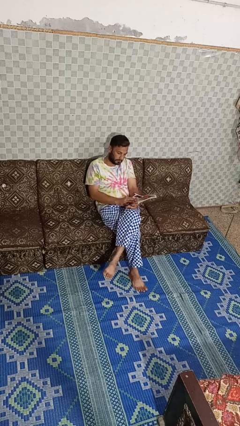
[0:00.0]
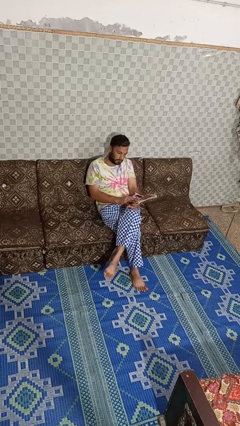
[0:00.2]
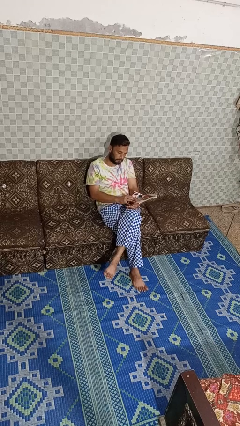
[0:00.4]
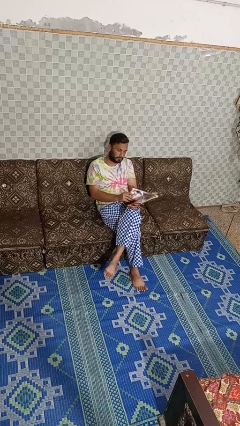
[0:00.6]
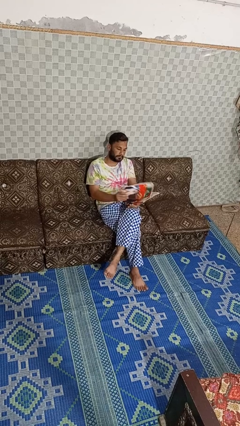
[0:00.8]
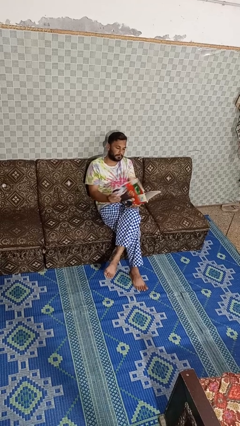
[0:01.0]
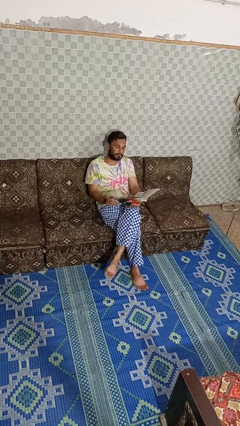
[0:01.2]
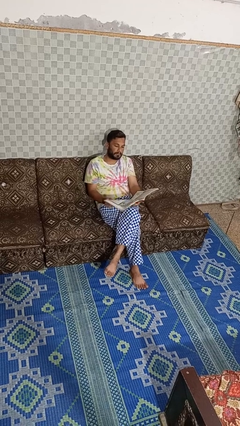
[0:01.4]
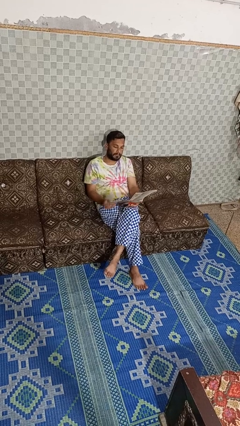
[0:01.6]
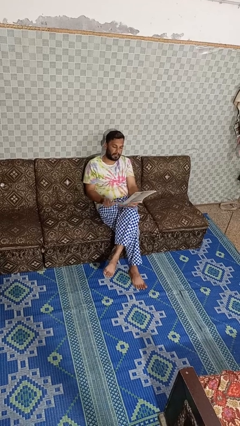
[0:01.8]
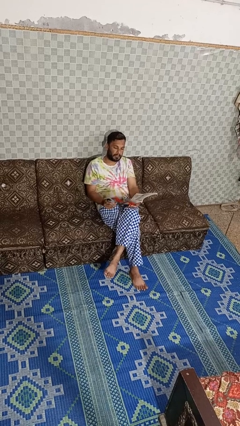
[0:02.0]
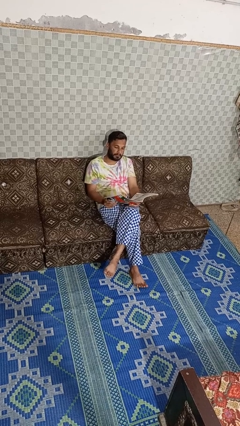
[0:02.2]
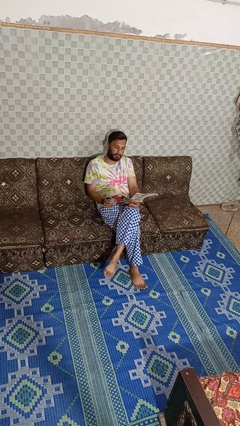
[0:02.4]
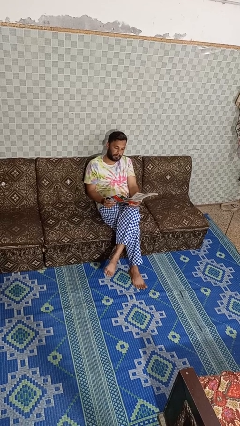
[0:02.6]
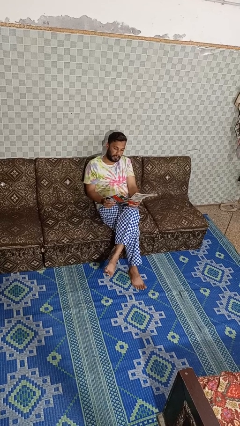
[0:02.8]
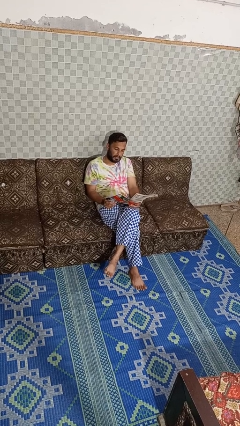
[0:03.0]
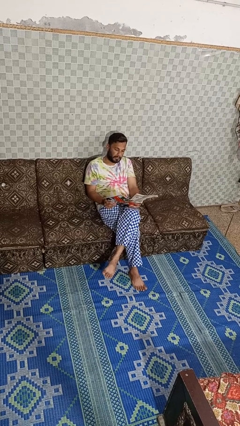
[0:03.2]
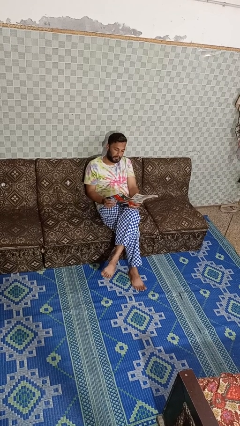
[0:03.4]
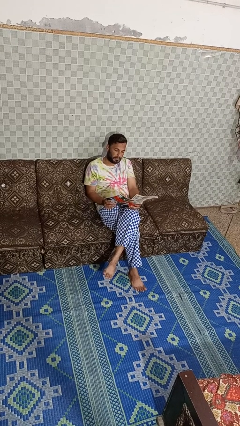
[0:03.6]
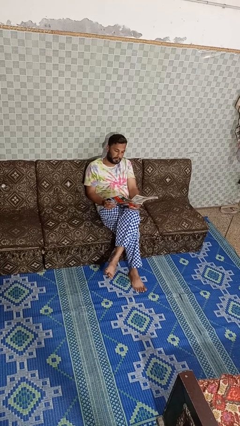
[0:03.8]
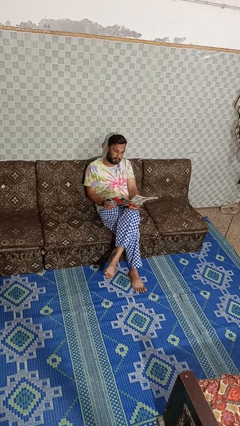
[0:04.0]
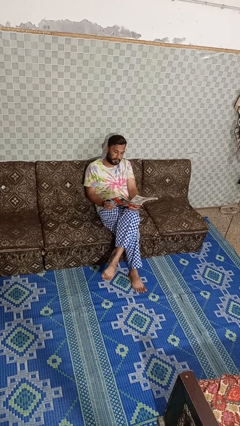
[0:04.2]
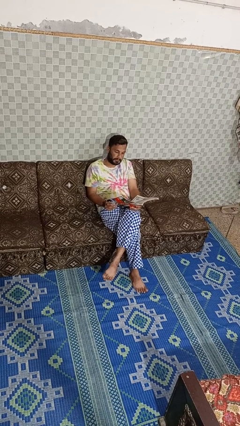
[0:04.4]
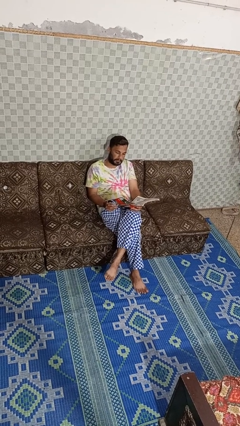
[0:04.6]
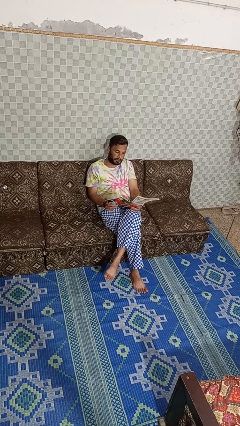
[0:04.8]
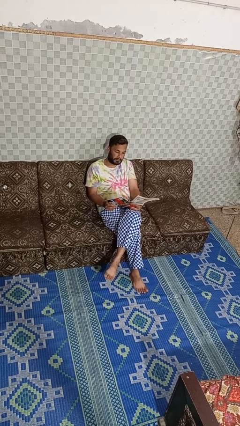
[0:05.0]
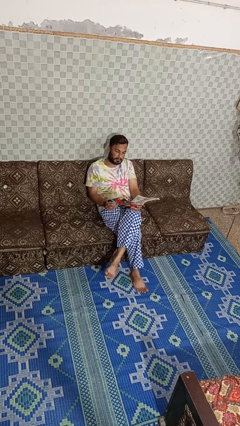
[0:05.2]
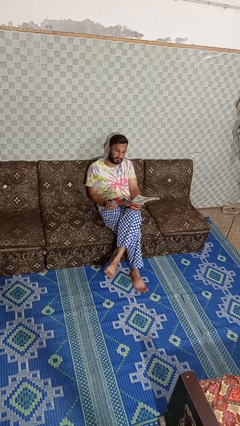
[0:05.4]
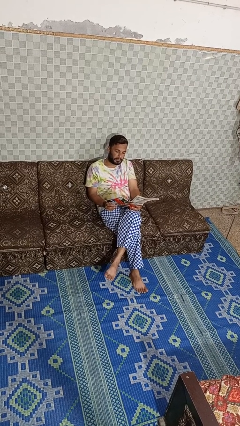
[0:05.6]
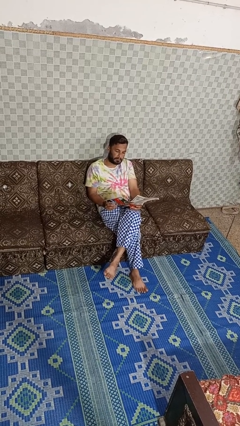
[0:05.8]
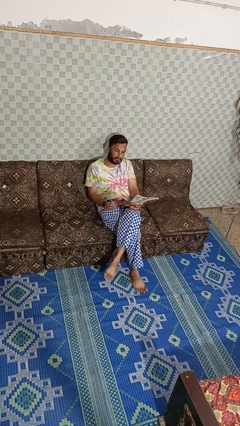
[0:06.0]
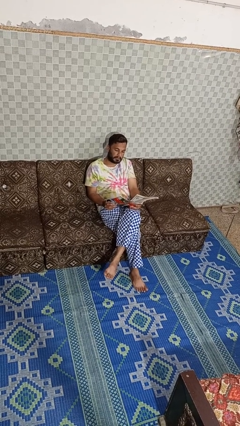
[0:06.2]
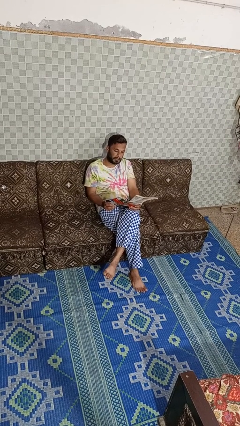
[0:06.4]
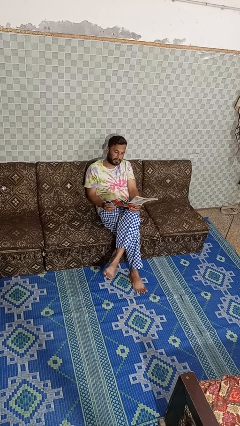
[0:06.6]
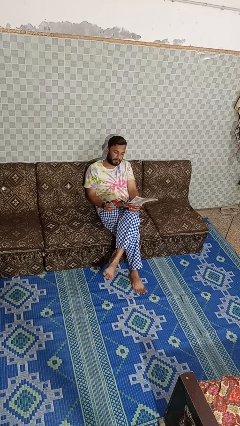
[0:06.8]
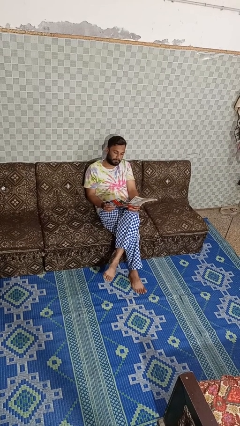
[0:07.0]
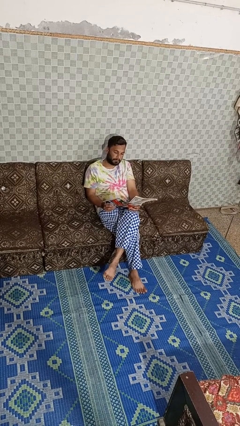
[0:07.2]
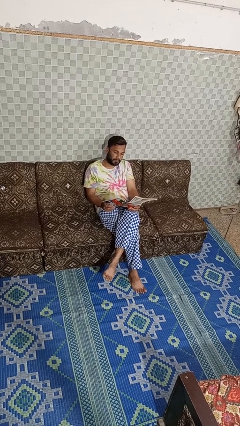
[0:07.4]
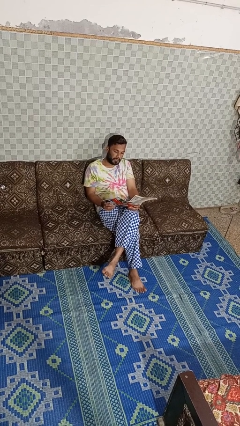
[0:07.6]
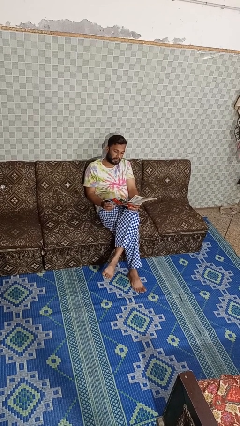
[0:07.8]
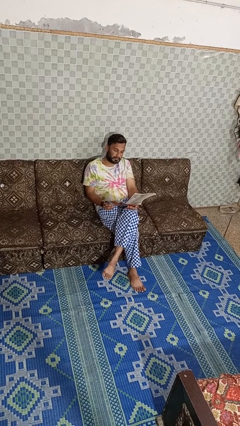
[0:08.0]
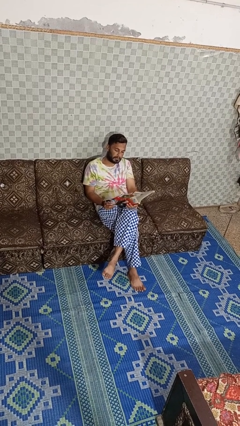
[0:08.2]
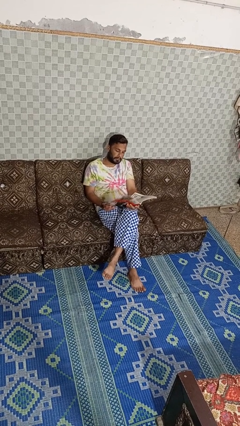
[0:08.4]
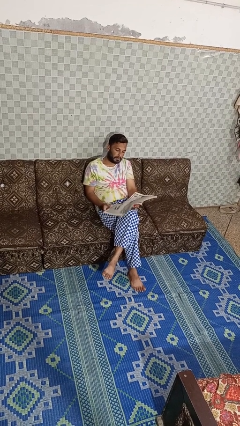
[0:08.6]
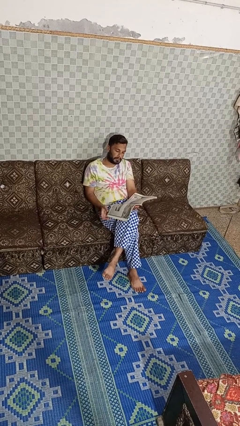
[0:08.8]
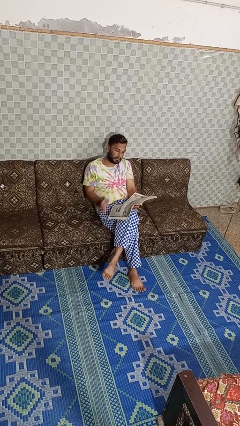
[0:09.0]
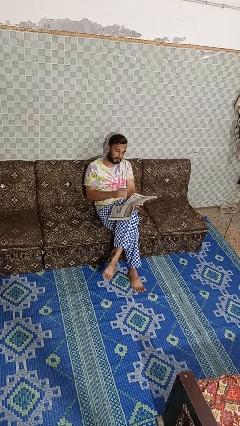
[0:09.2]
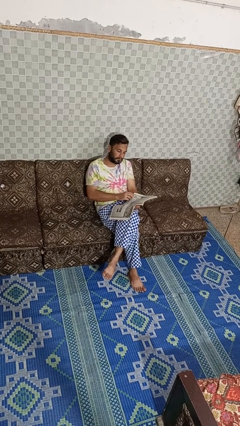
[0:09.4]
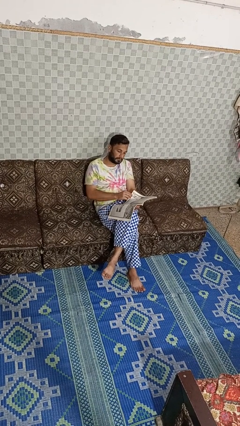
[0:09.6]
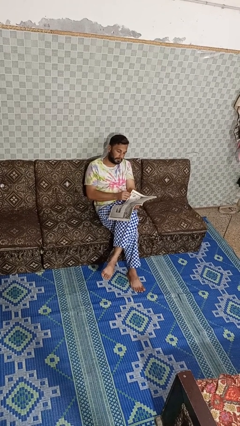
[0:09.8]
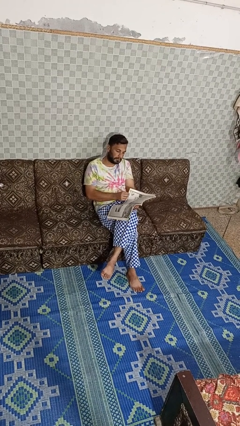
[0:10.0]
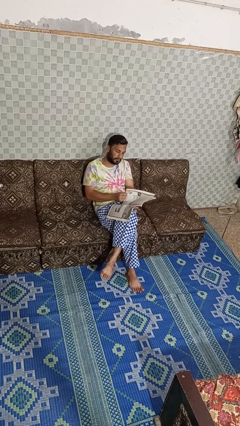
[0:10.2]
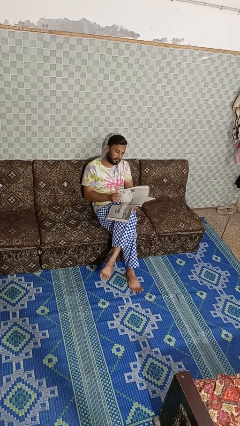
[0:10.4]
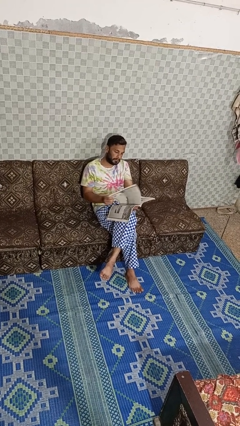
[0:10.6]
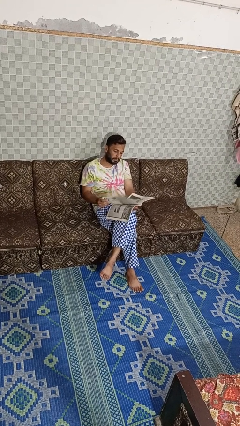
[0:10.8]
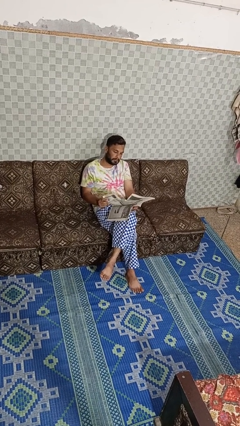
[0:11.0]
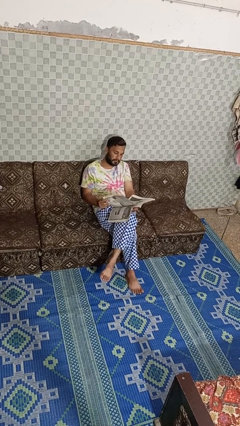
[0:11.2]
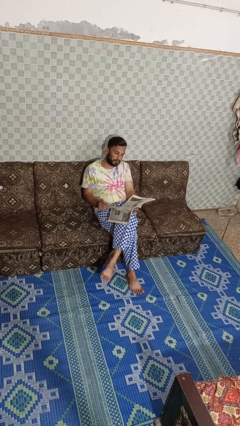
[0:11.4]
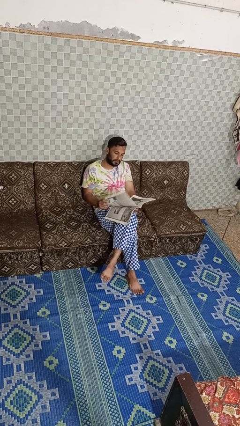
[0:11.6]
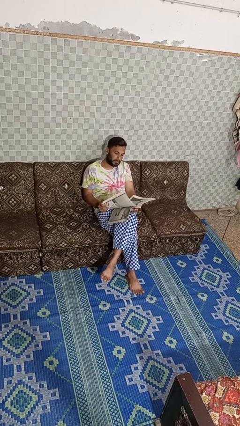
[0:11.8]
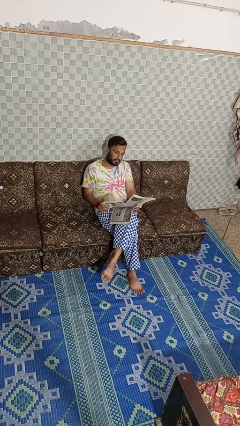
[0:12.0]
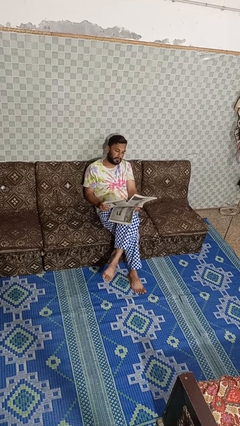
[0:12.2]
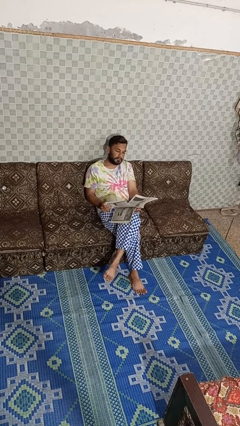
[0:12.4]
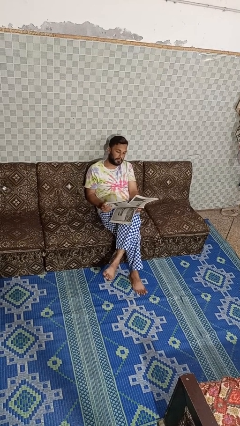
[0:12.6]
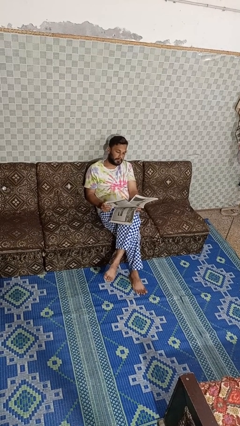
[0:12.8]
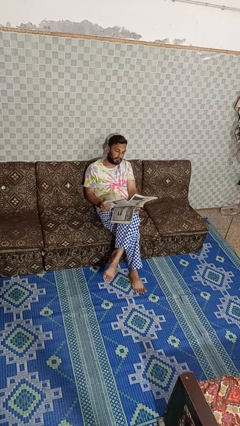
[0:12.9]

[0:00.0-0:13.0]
person reads magazine

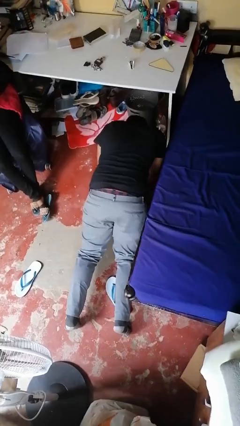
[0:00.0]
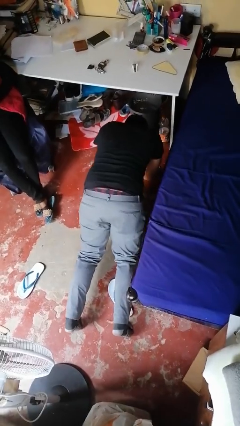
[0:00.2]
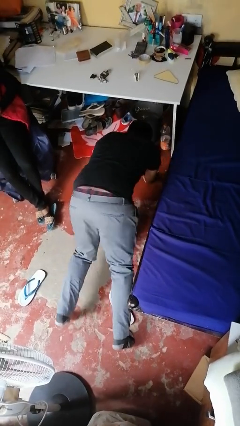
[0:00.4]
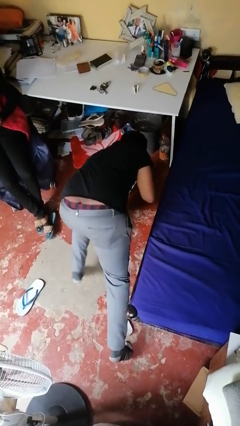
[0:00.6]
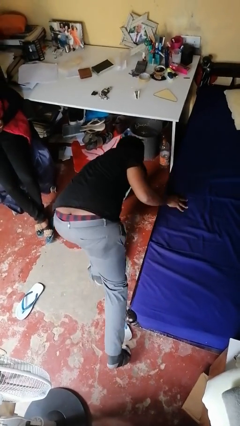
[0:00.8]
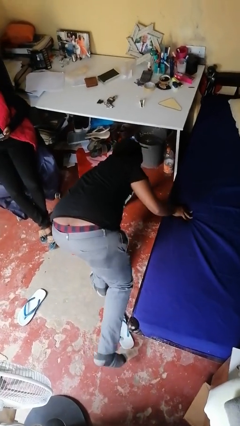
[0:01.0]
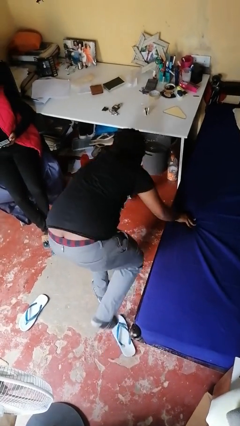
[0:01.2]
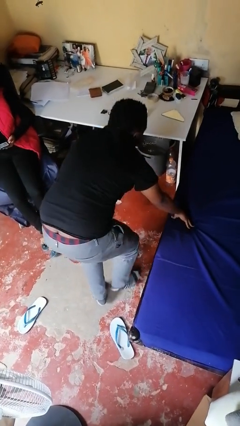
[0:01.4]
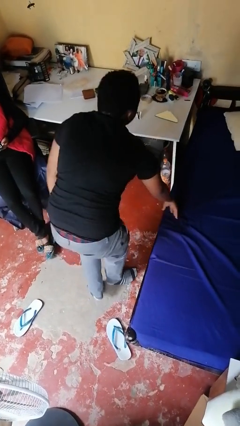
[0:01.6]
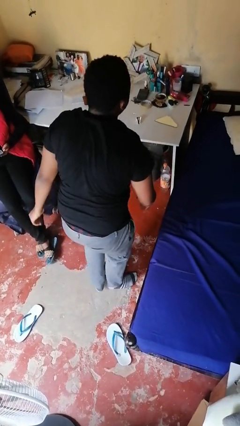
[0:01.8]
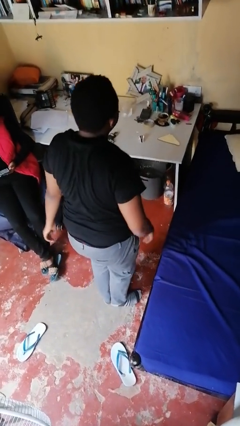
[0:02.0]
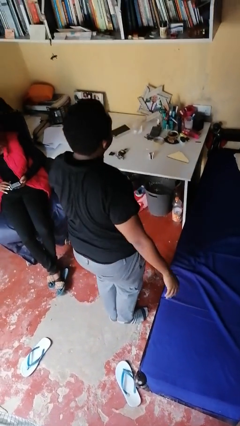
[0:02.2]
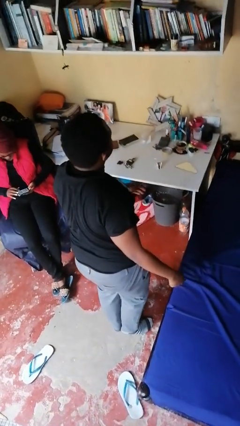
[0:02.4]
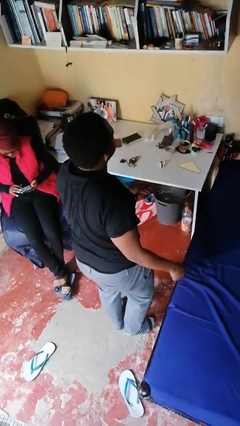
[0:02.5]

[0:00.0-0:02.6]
person stands up from floor

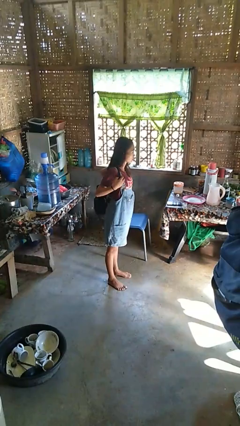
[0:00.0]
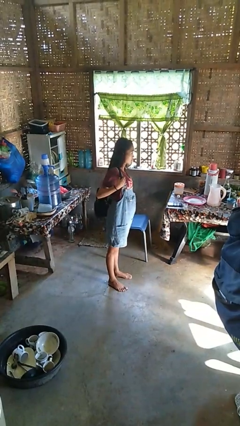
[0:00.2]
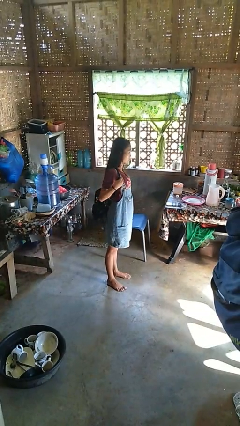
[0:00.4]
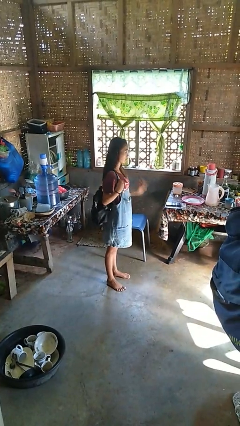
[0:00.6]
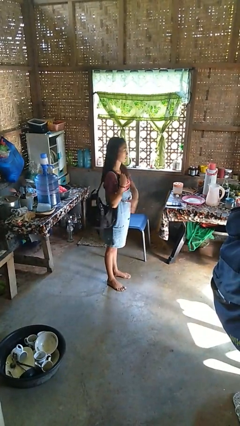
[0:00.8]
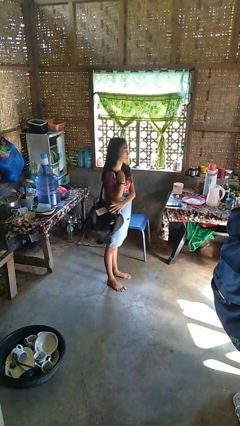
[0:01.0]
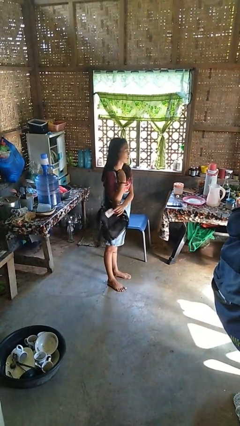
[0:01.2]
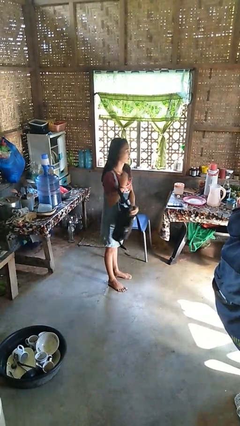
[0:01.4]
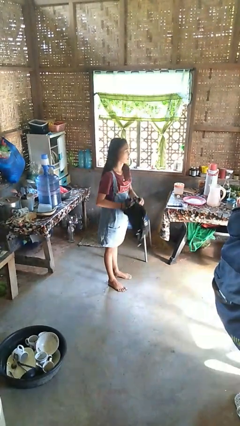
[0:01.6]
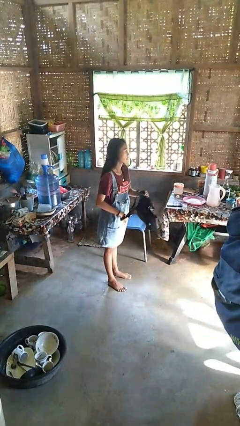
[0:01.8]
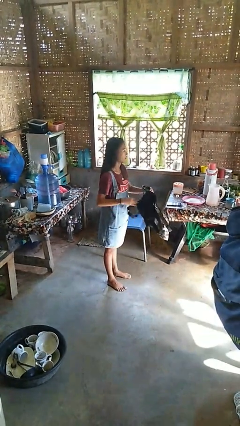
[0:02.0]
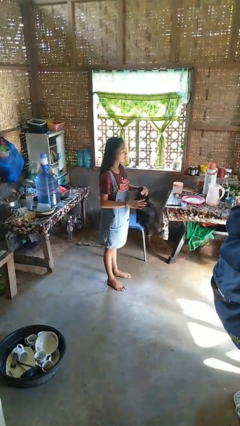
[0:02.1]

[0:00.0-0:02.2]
person takes off backpack
